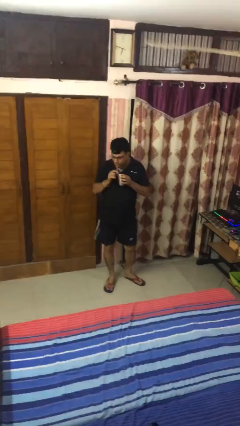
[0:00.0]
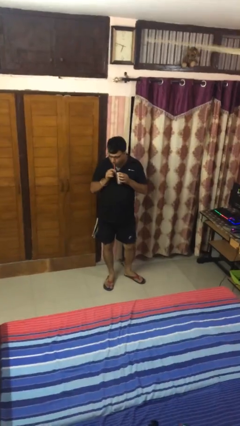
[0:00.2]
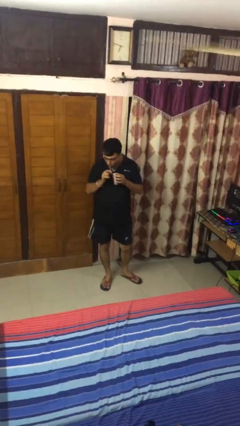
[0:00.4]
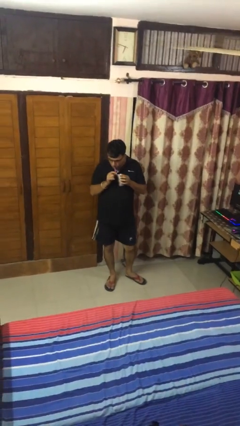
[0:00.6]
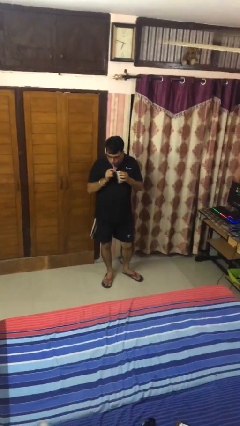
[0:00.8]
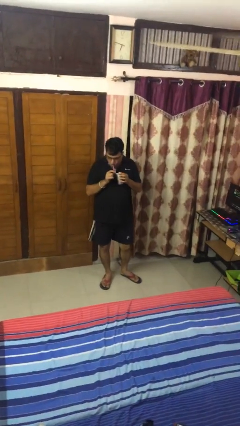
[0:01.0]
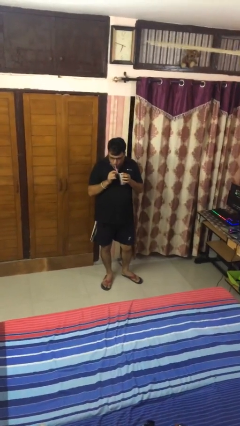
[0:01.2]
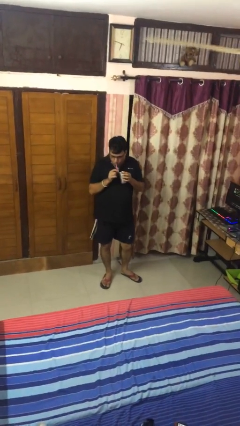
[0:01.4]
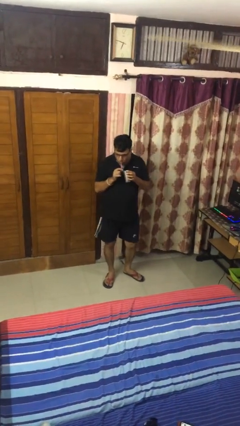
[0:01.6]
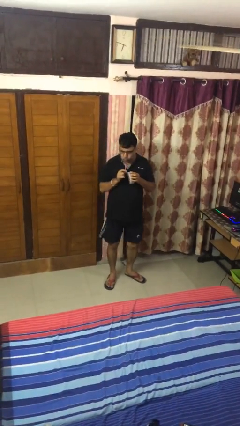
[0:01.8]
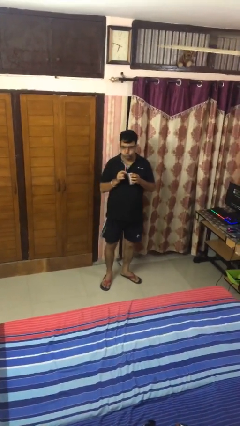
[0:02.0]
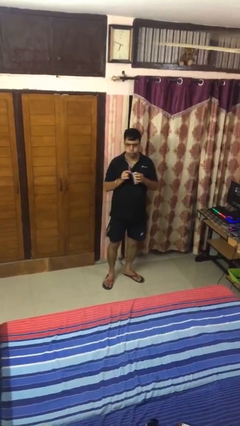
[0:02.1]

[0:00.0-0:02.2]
person drinks from straw

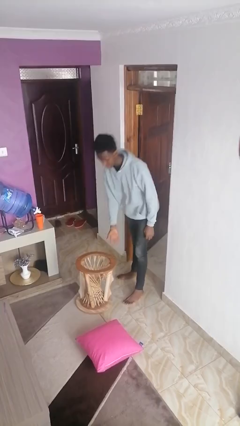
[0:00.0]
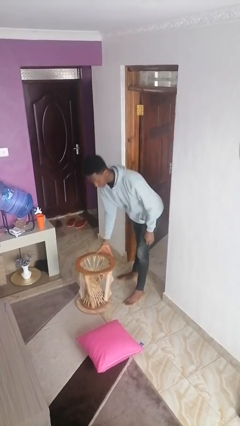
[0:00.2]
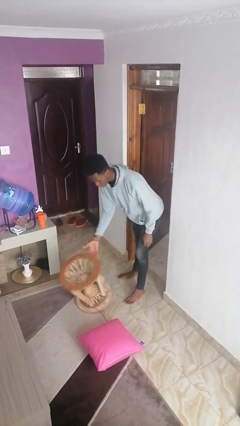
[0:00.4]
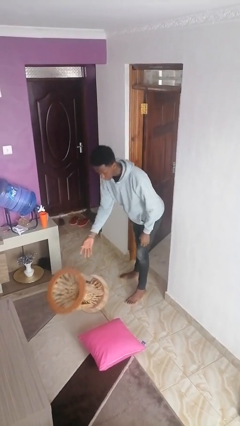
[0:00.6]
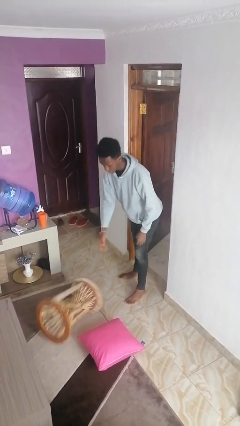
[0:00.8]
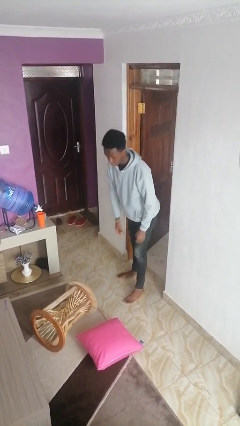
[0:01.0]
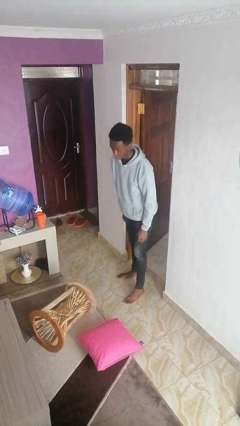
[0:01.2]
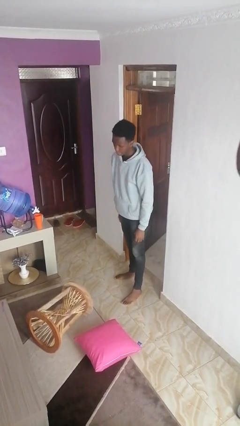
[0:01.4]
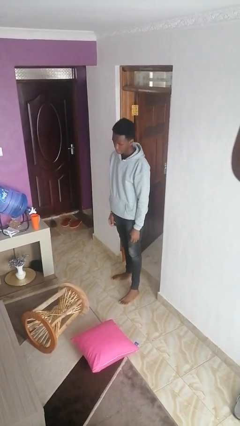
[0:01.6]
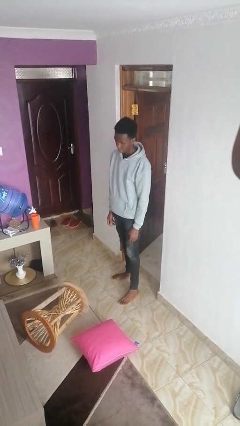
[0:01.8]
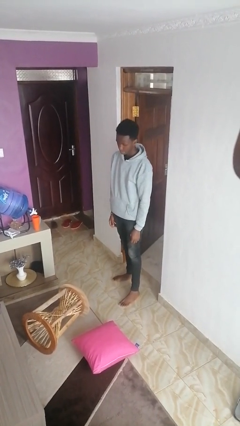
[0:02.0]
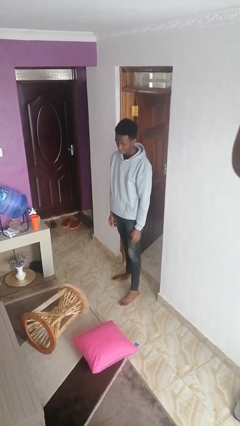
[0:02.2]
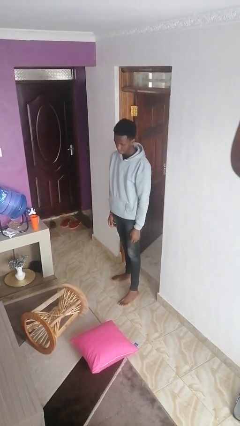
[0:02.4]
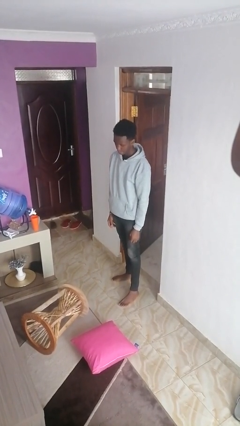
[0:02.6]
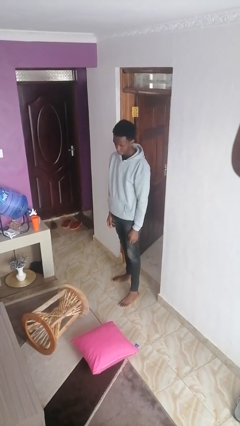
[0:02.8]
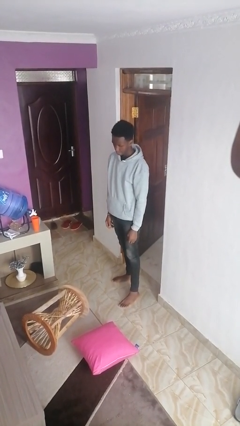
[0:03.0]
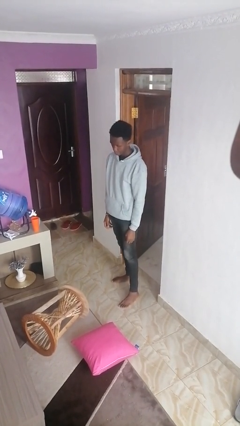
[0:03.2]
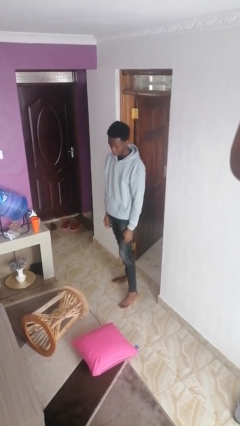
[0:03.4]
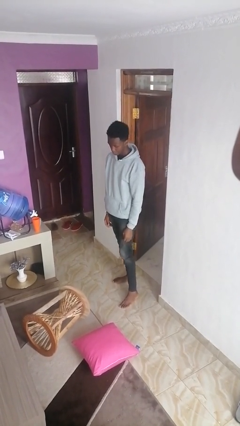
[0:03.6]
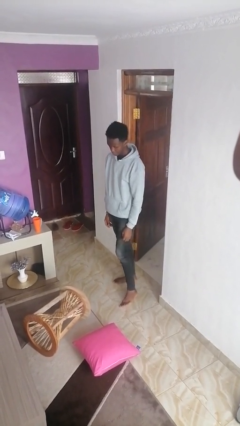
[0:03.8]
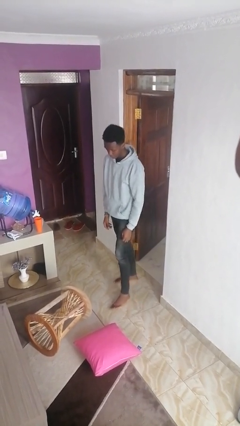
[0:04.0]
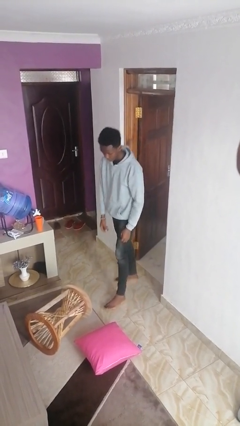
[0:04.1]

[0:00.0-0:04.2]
person knocks over furniture

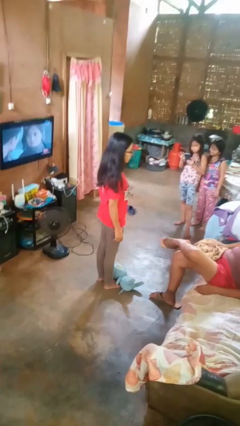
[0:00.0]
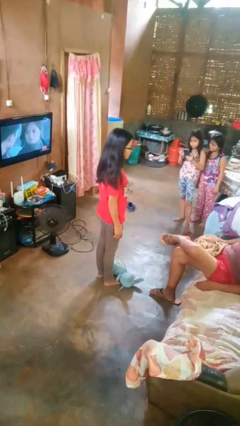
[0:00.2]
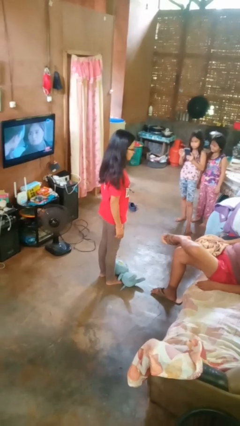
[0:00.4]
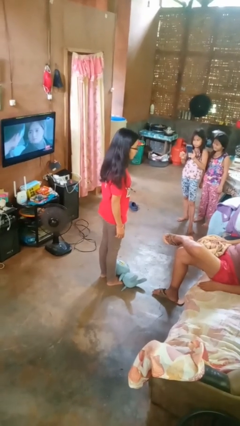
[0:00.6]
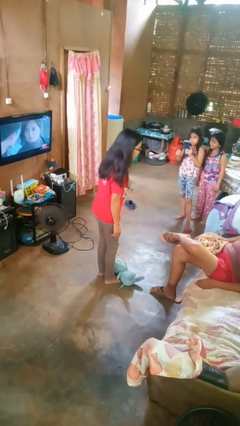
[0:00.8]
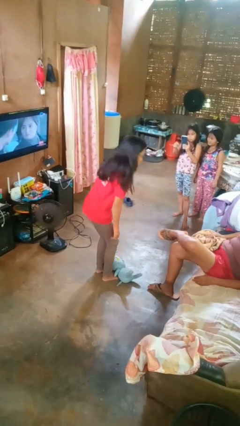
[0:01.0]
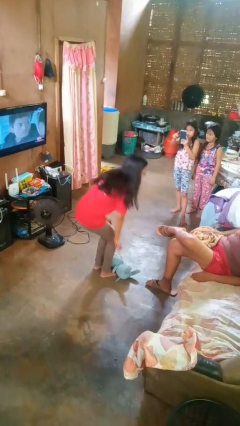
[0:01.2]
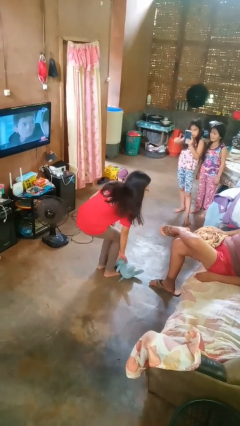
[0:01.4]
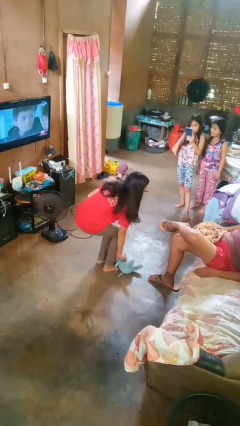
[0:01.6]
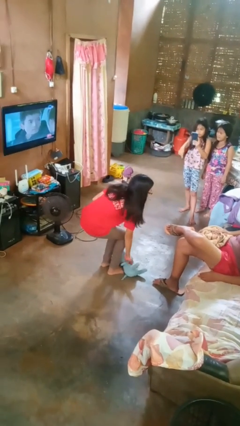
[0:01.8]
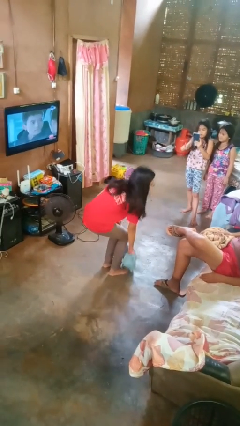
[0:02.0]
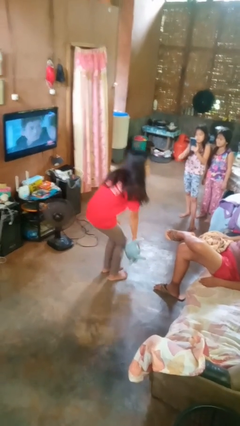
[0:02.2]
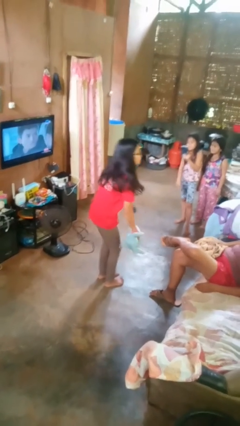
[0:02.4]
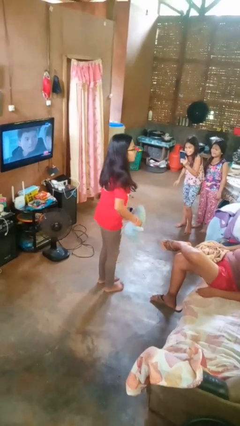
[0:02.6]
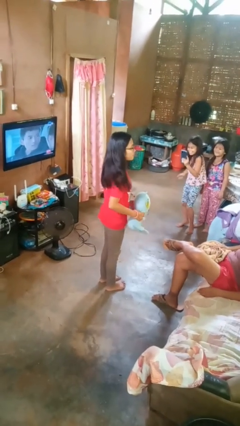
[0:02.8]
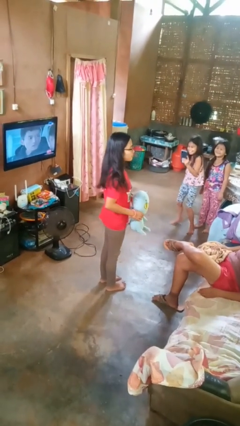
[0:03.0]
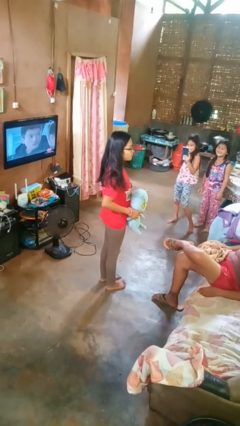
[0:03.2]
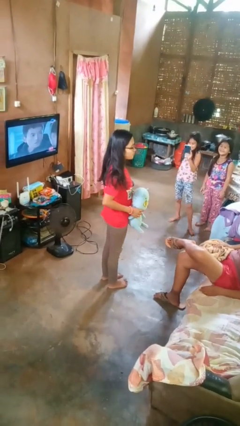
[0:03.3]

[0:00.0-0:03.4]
person picks up object from floor

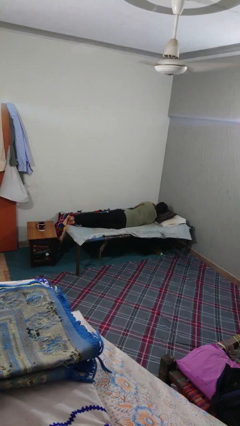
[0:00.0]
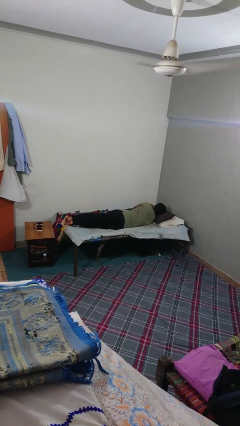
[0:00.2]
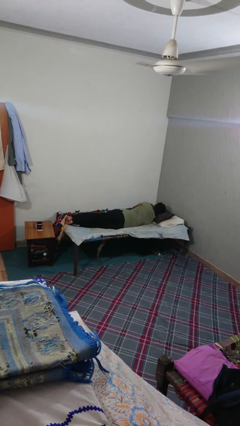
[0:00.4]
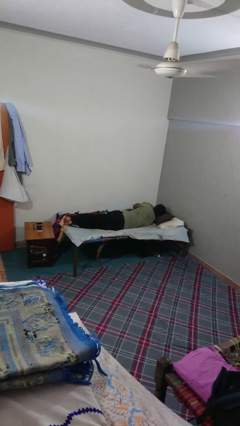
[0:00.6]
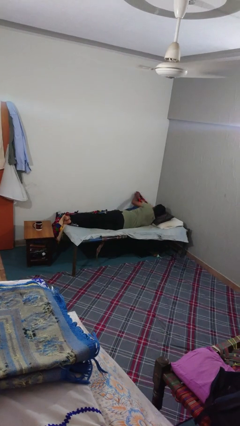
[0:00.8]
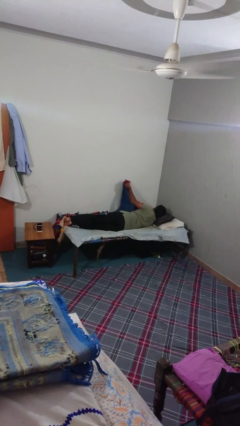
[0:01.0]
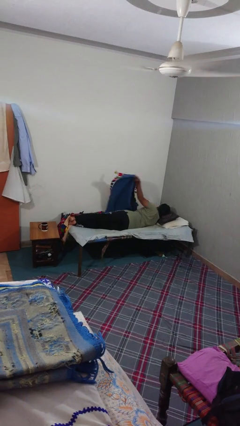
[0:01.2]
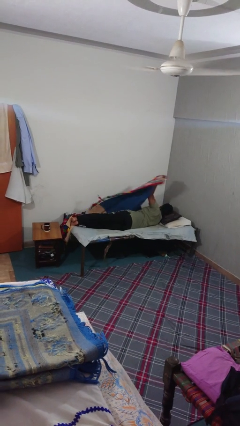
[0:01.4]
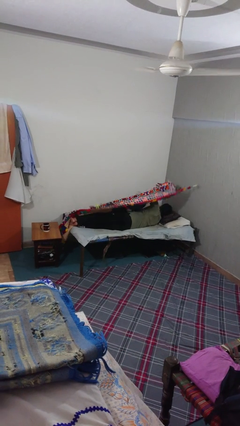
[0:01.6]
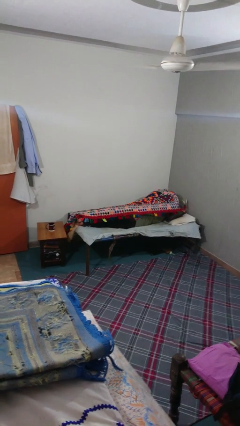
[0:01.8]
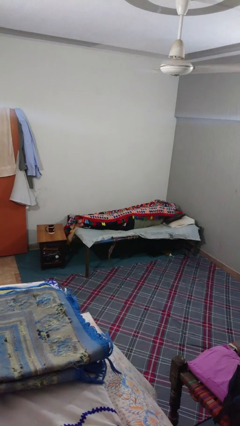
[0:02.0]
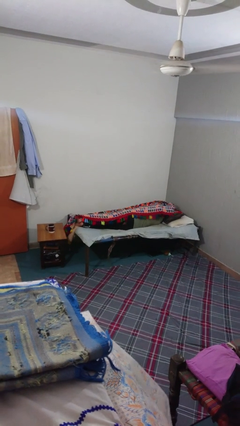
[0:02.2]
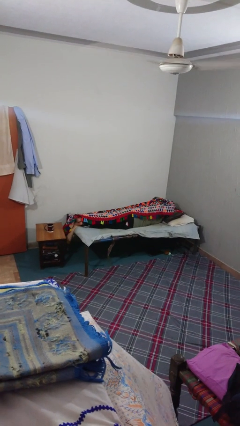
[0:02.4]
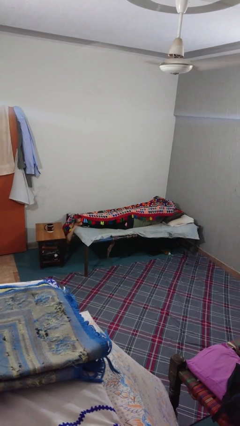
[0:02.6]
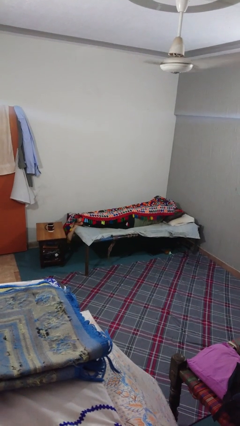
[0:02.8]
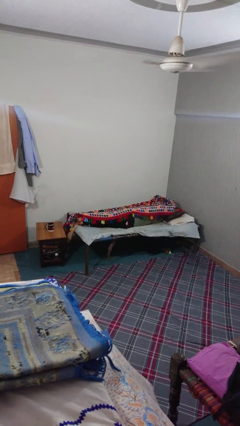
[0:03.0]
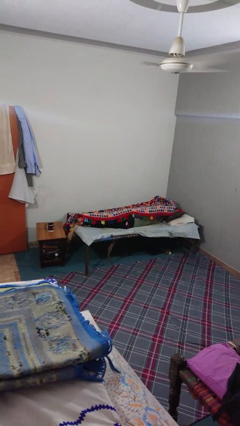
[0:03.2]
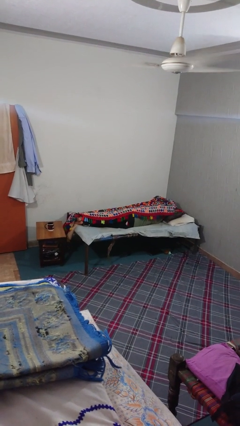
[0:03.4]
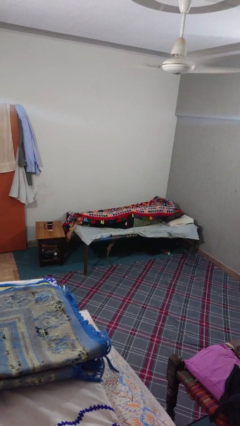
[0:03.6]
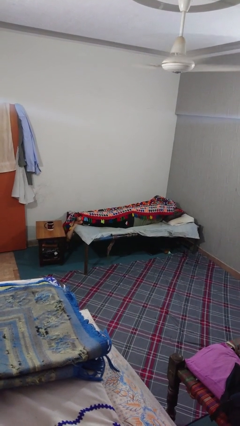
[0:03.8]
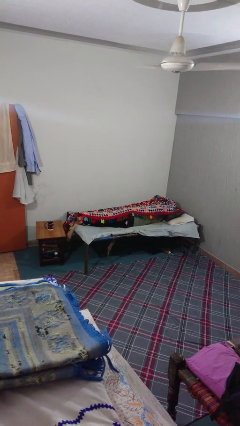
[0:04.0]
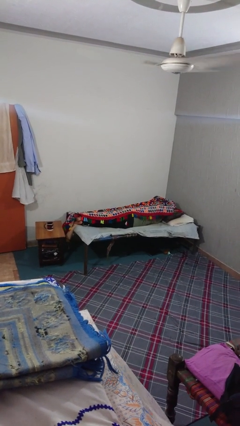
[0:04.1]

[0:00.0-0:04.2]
person covers with blanket

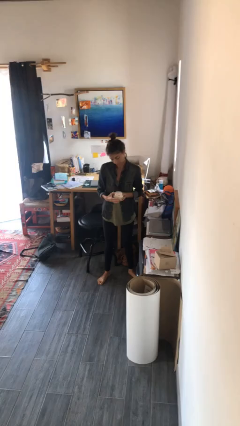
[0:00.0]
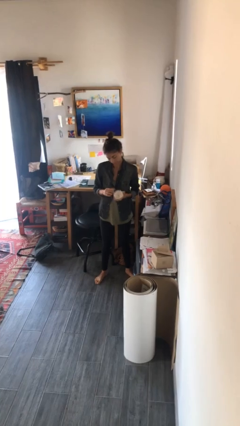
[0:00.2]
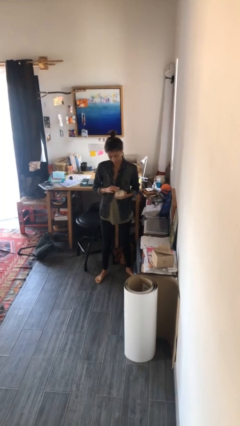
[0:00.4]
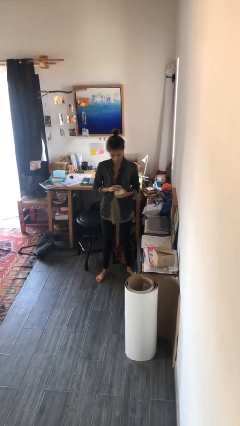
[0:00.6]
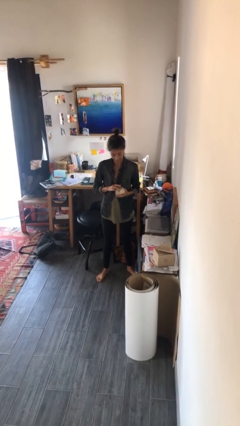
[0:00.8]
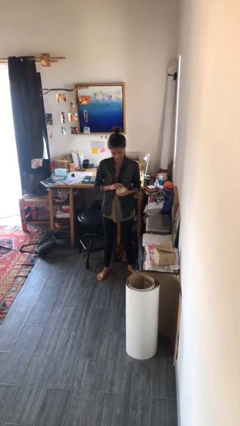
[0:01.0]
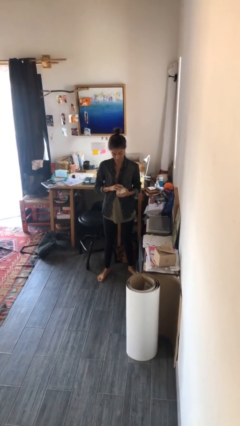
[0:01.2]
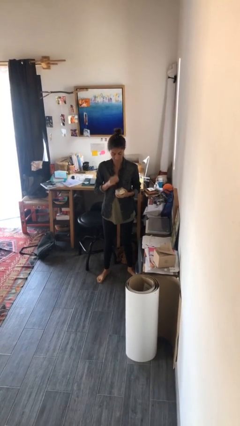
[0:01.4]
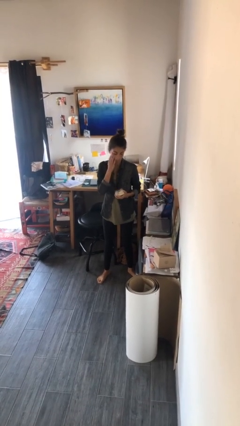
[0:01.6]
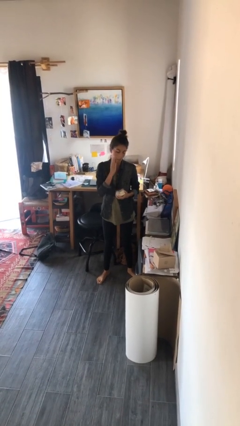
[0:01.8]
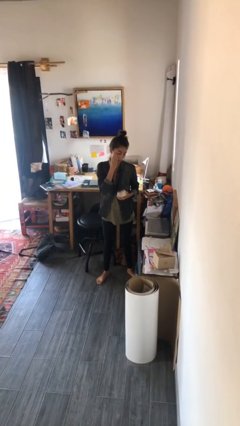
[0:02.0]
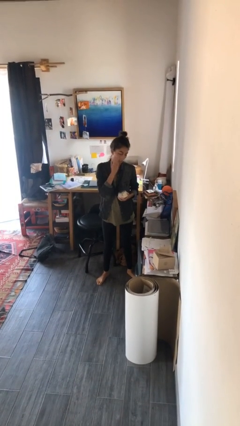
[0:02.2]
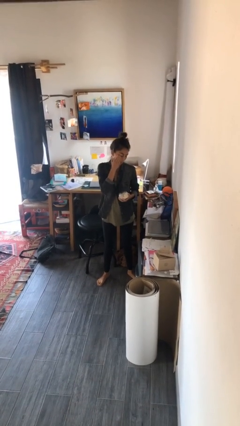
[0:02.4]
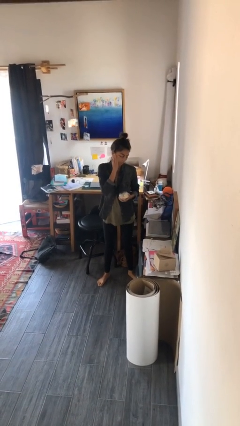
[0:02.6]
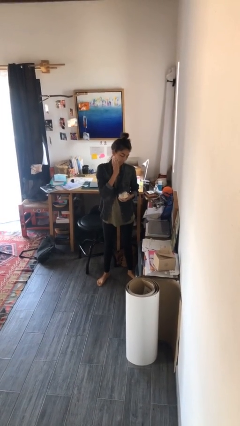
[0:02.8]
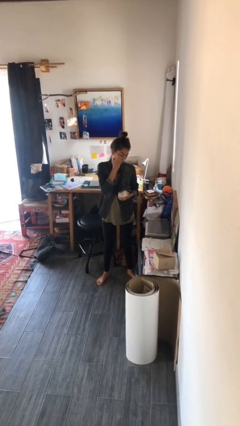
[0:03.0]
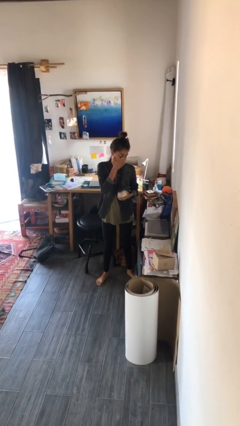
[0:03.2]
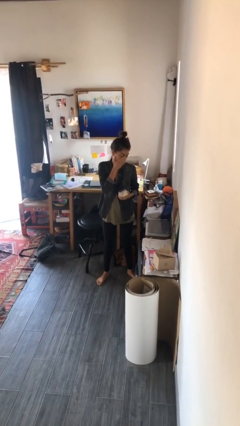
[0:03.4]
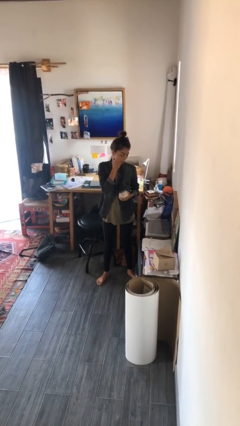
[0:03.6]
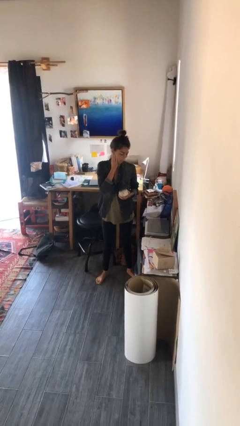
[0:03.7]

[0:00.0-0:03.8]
person applies facial moisturizer
